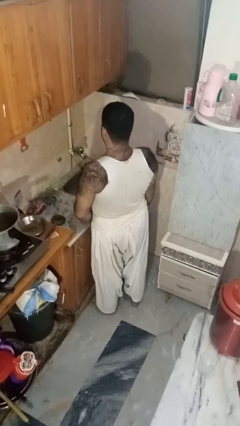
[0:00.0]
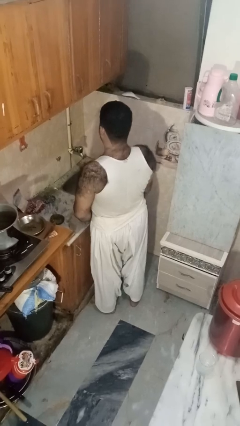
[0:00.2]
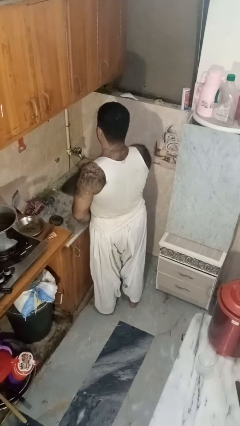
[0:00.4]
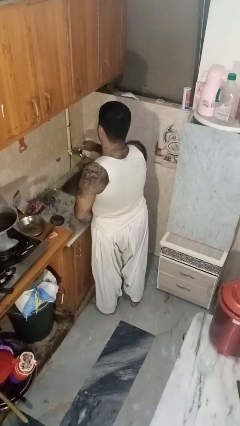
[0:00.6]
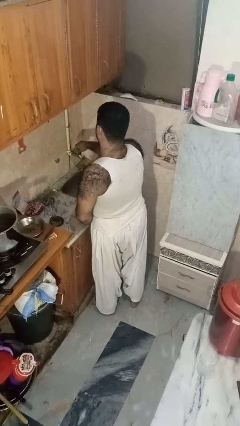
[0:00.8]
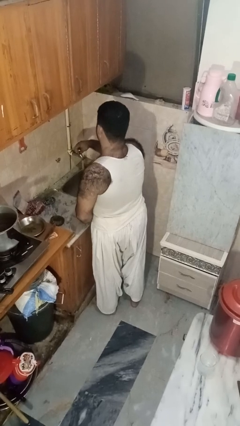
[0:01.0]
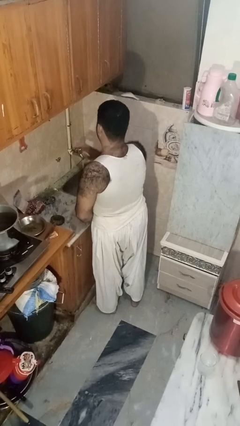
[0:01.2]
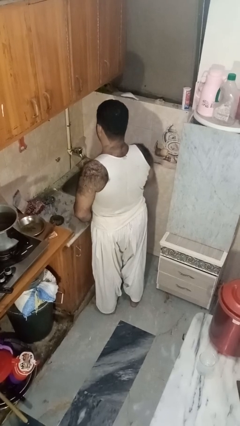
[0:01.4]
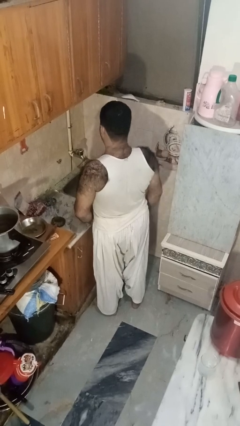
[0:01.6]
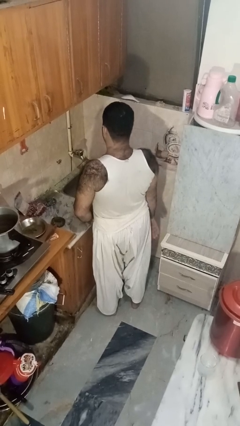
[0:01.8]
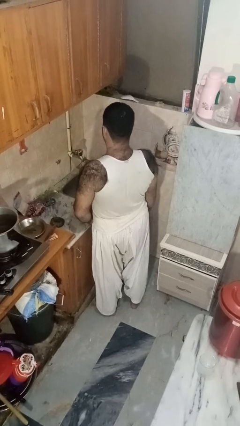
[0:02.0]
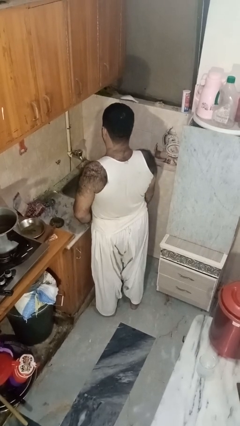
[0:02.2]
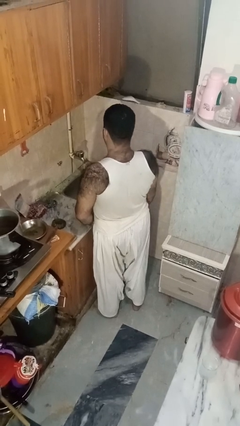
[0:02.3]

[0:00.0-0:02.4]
person turns on faucet

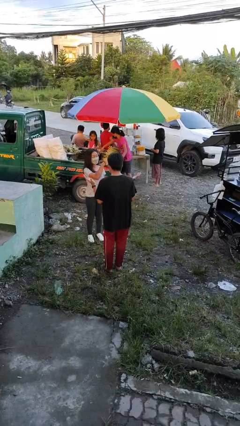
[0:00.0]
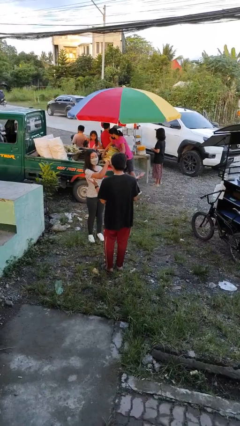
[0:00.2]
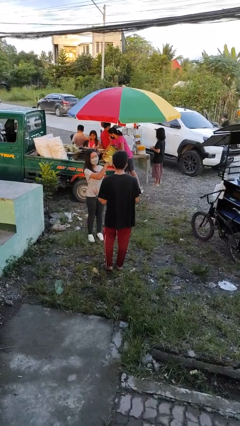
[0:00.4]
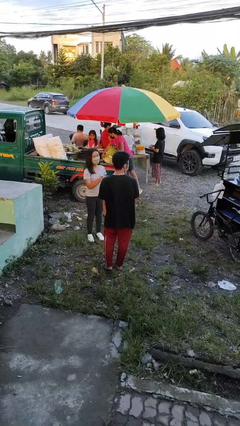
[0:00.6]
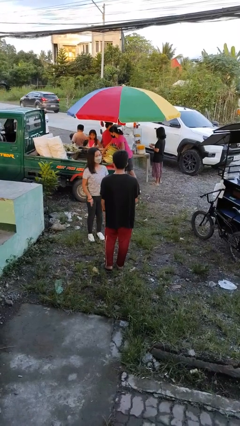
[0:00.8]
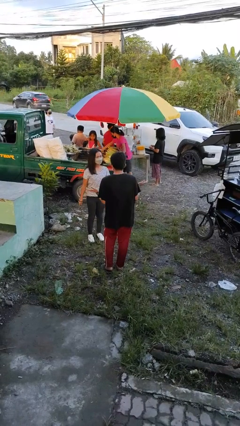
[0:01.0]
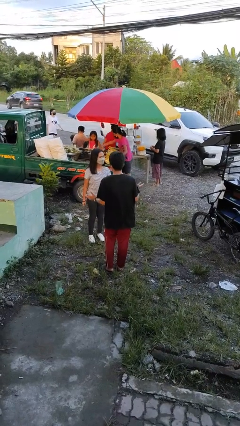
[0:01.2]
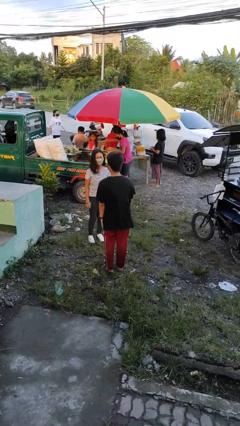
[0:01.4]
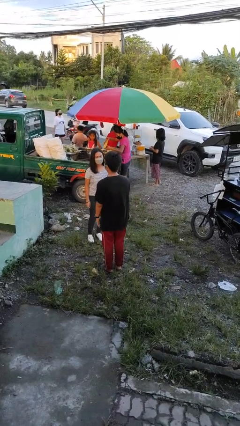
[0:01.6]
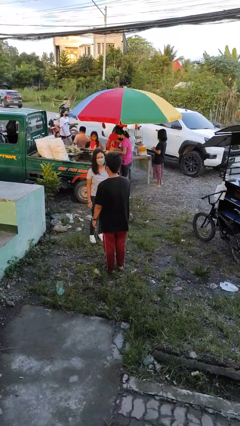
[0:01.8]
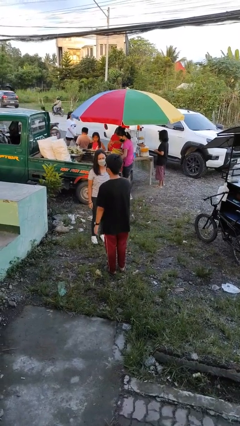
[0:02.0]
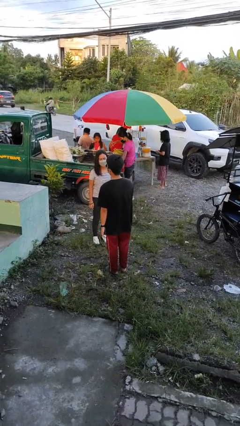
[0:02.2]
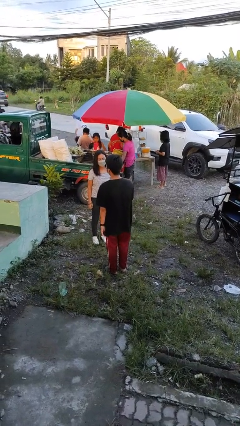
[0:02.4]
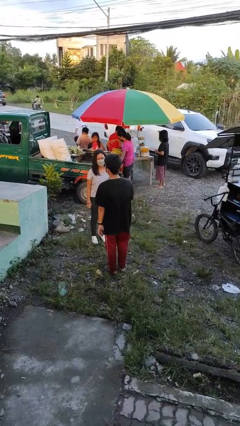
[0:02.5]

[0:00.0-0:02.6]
person talks to person

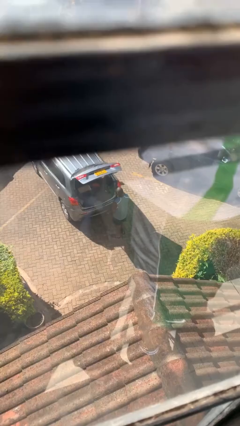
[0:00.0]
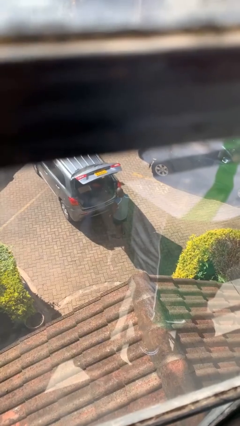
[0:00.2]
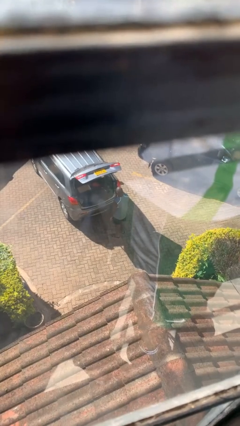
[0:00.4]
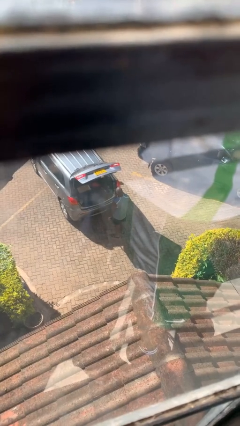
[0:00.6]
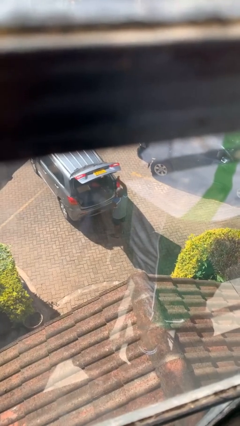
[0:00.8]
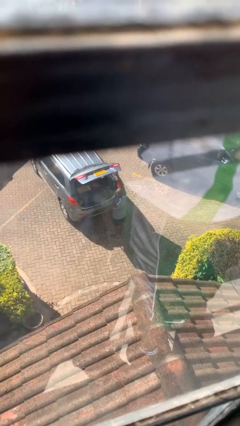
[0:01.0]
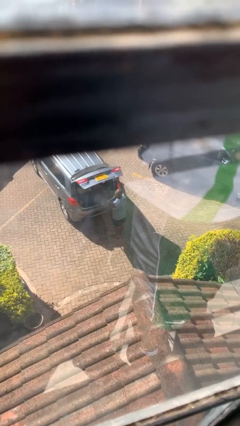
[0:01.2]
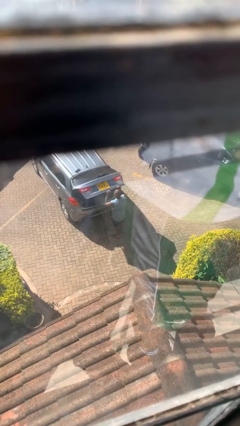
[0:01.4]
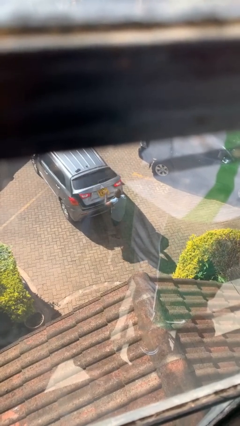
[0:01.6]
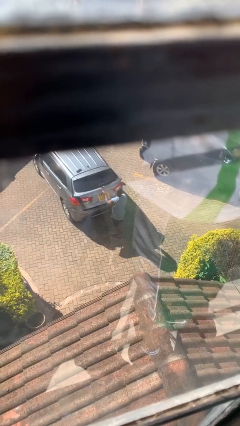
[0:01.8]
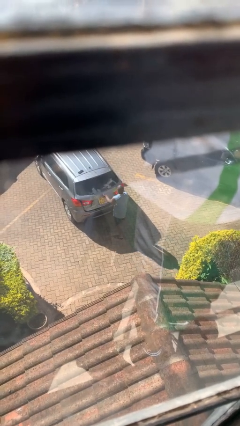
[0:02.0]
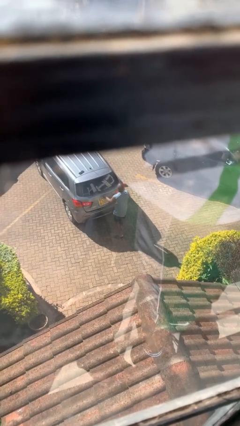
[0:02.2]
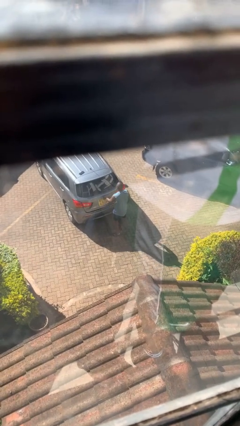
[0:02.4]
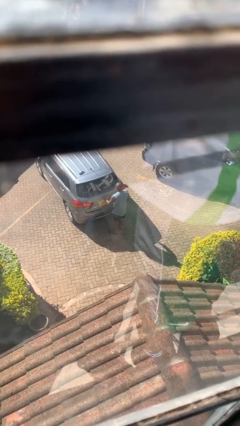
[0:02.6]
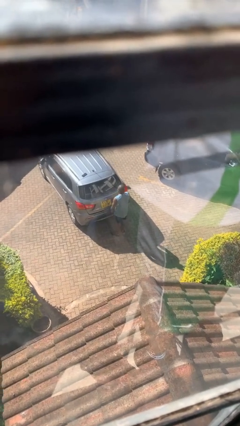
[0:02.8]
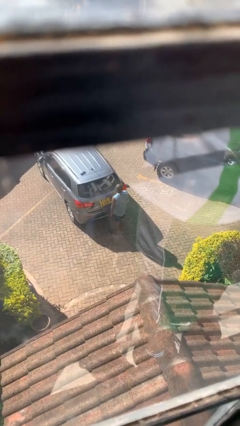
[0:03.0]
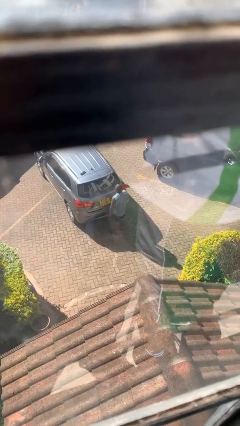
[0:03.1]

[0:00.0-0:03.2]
person closes car trunk

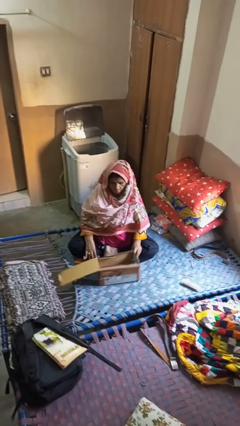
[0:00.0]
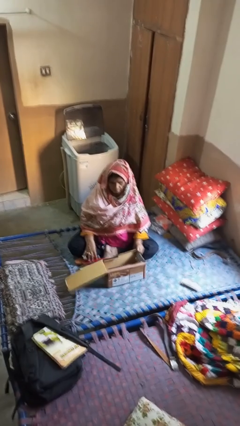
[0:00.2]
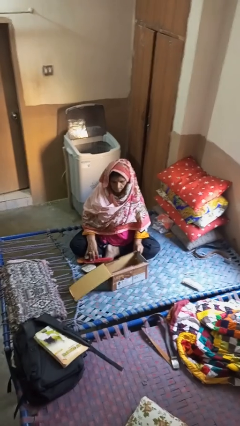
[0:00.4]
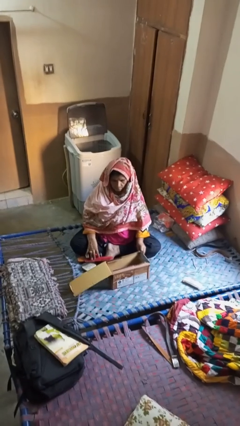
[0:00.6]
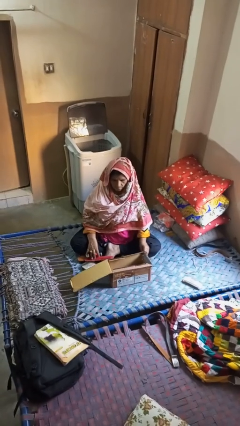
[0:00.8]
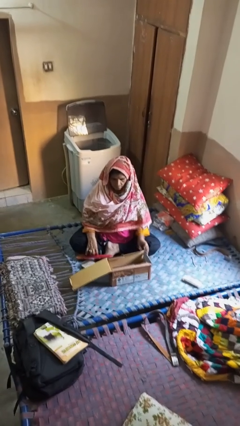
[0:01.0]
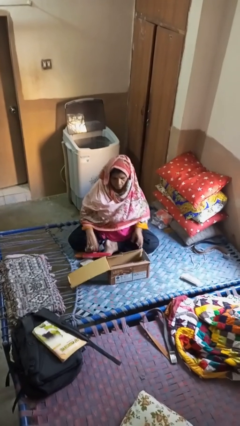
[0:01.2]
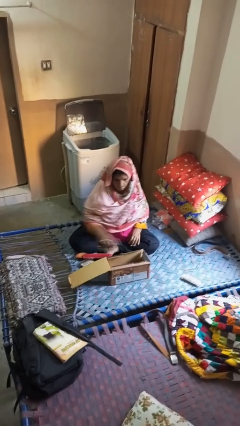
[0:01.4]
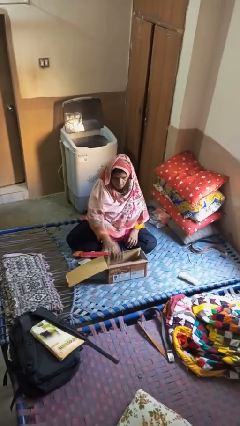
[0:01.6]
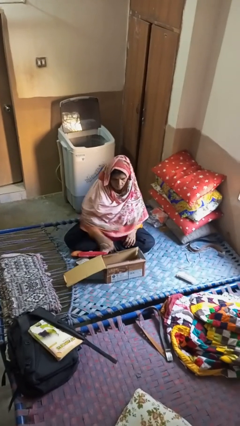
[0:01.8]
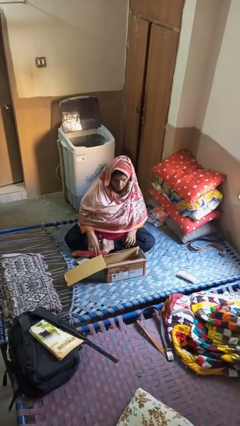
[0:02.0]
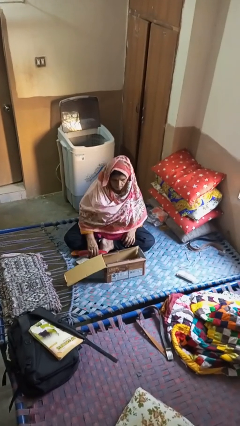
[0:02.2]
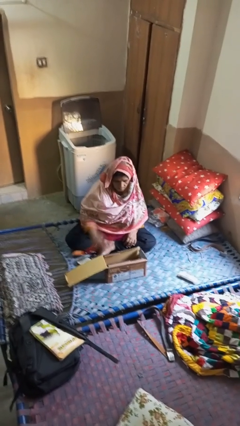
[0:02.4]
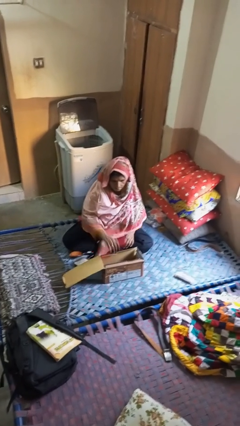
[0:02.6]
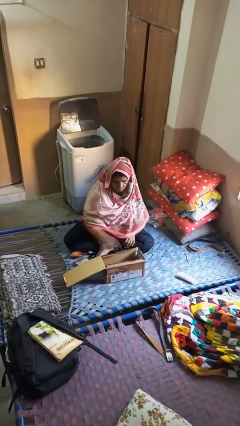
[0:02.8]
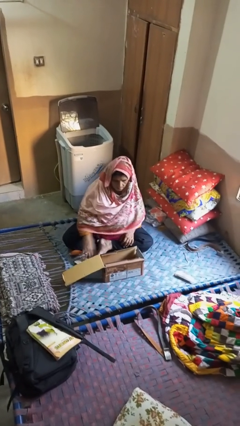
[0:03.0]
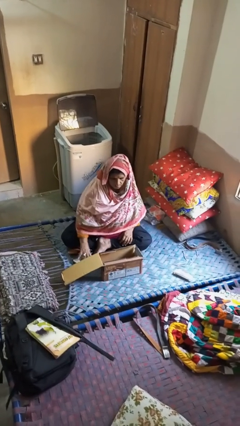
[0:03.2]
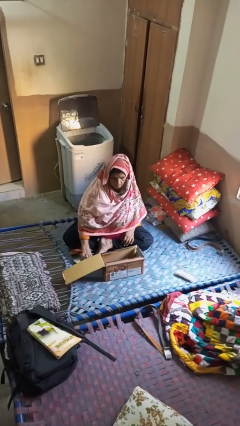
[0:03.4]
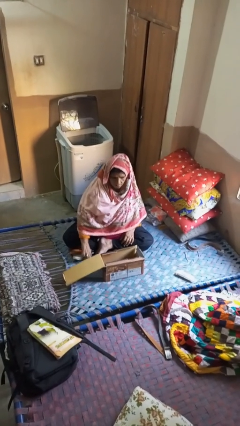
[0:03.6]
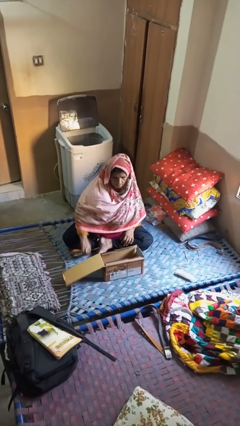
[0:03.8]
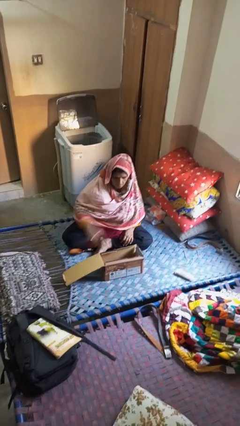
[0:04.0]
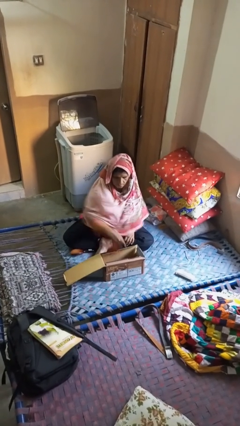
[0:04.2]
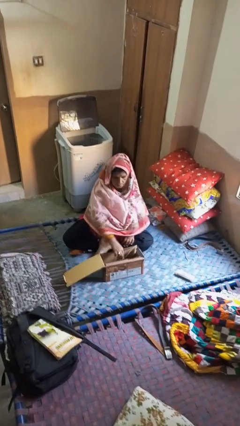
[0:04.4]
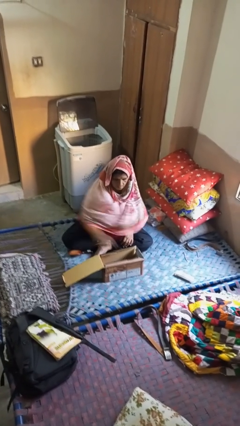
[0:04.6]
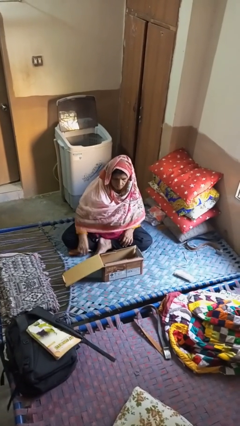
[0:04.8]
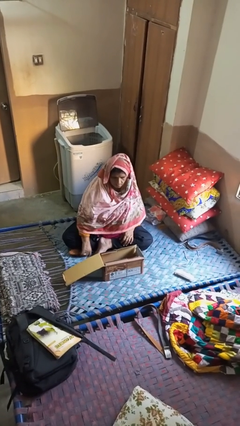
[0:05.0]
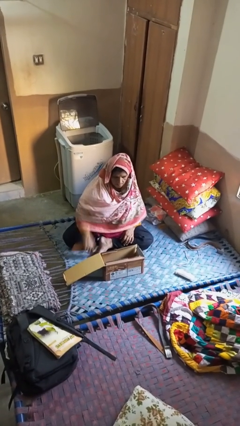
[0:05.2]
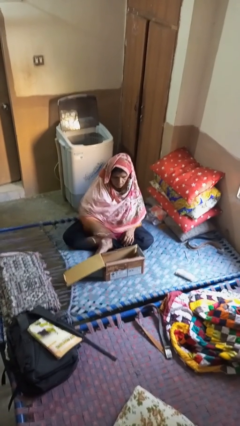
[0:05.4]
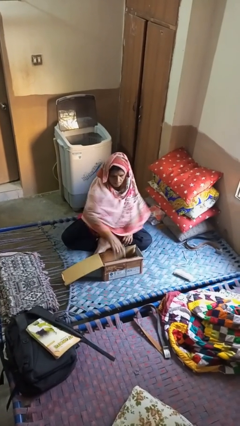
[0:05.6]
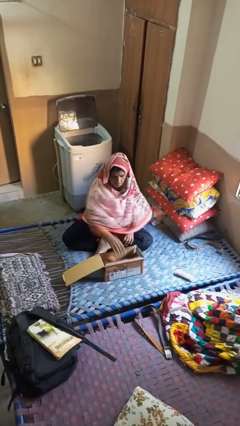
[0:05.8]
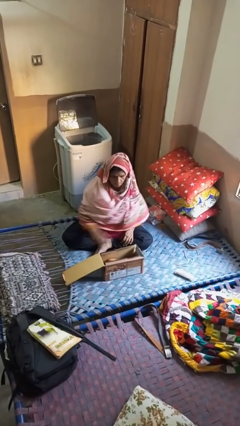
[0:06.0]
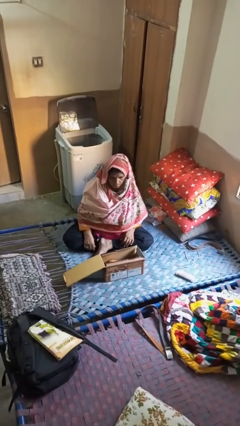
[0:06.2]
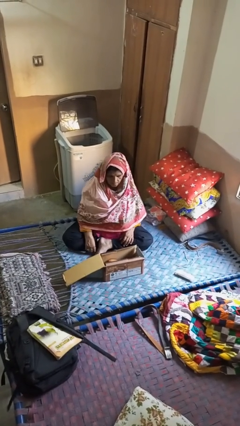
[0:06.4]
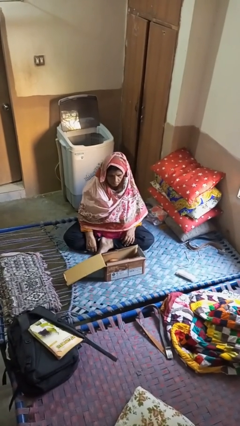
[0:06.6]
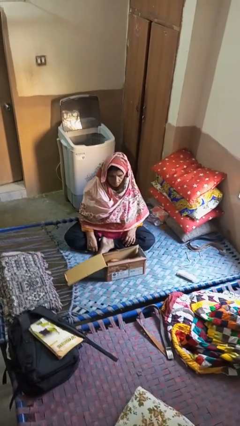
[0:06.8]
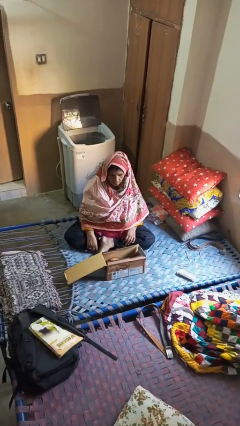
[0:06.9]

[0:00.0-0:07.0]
person puts object into box

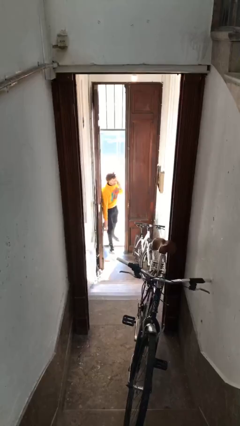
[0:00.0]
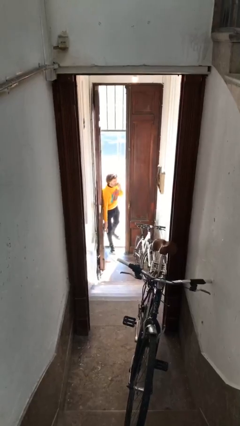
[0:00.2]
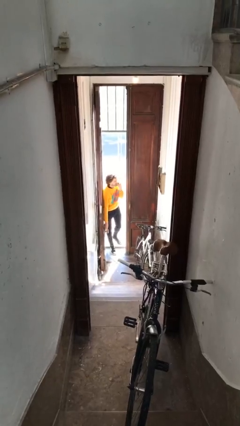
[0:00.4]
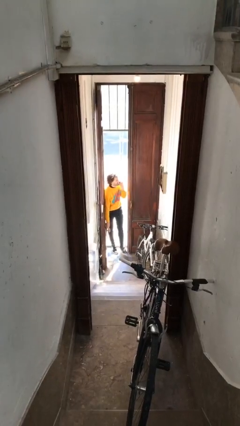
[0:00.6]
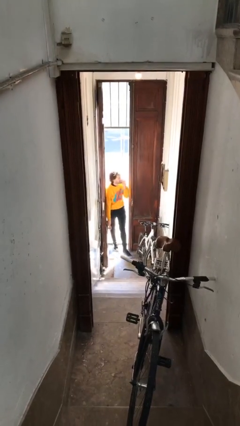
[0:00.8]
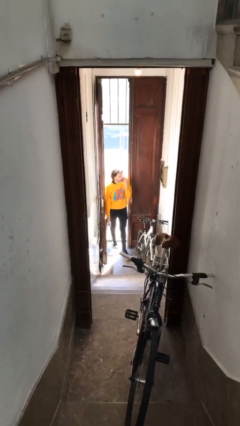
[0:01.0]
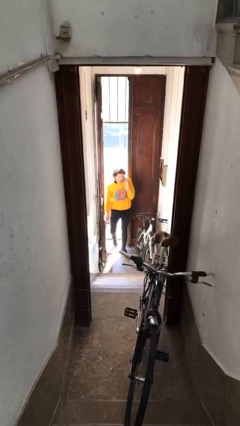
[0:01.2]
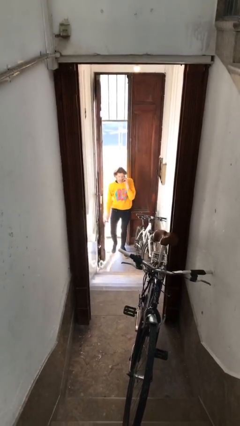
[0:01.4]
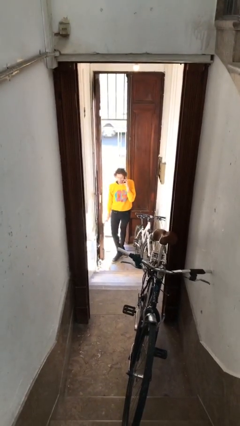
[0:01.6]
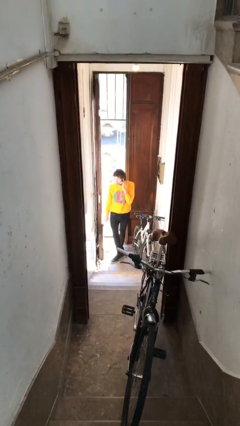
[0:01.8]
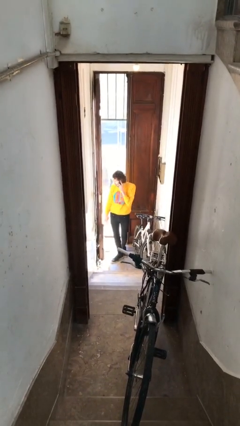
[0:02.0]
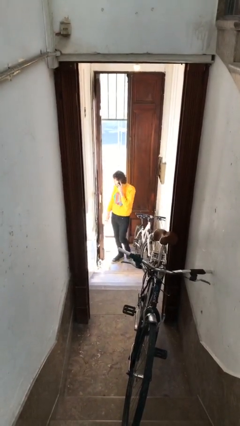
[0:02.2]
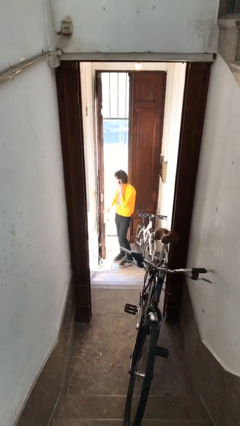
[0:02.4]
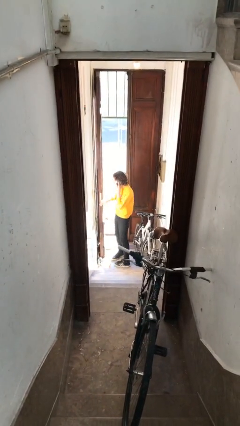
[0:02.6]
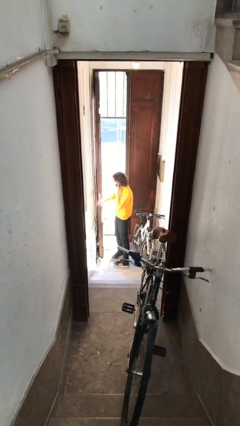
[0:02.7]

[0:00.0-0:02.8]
person enters scene through structure
